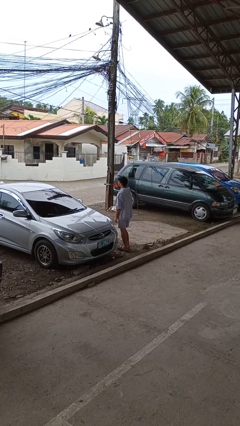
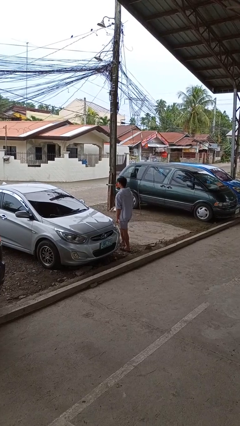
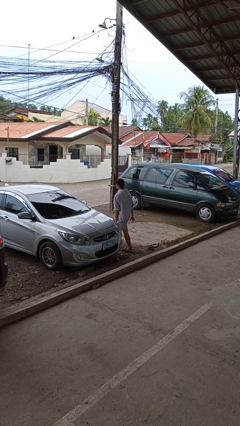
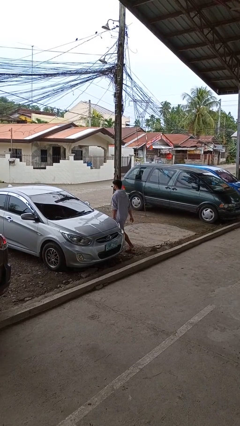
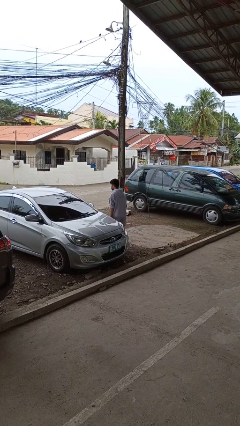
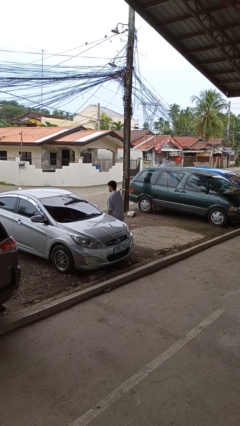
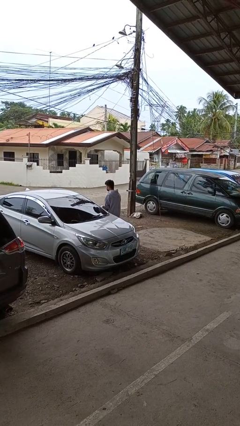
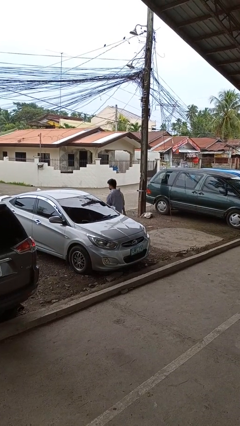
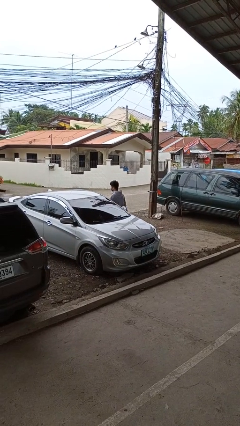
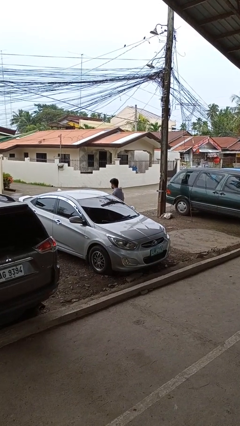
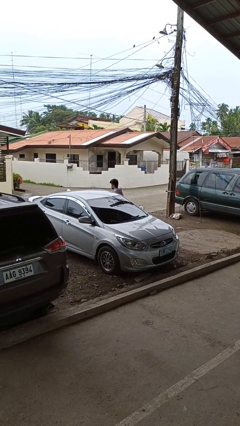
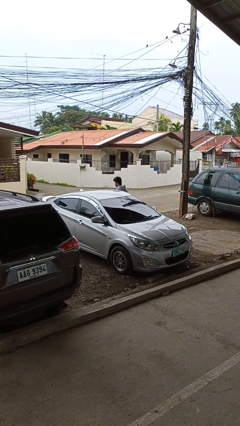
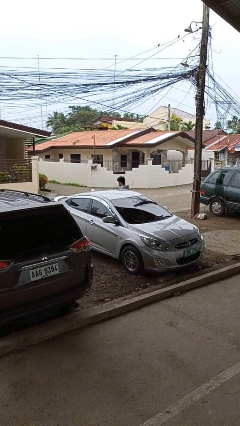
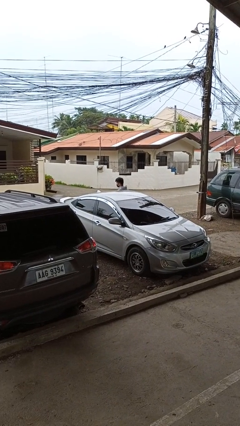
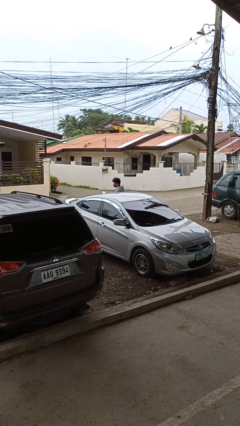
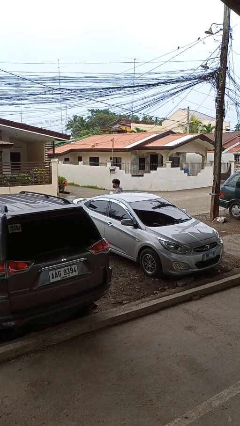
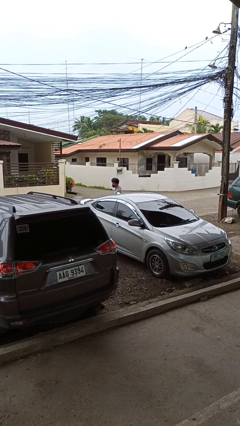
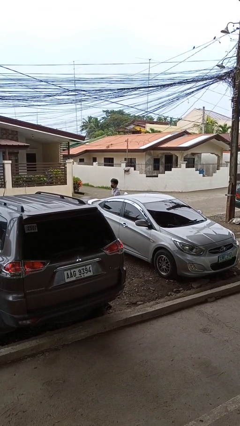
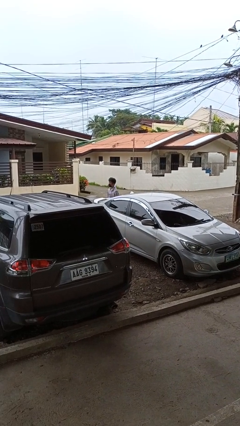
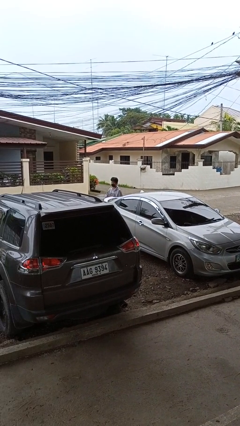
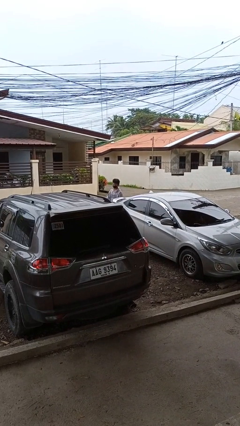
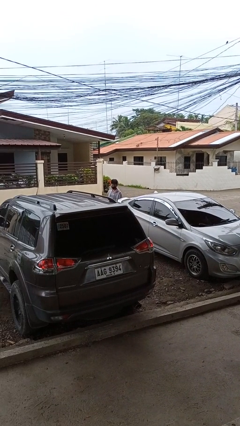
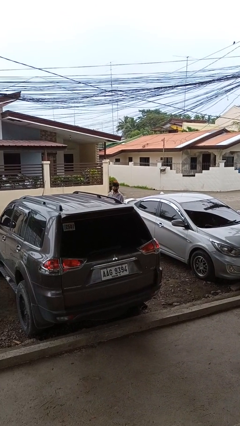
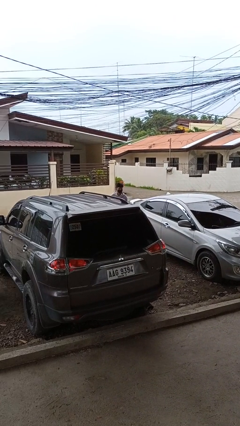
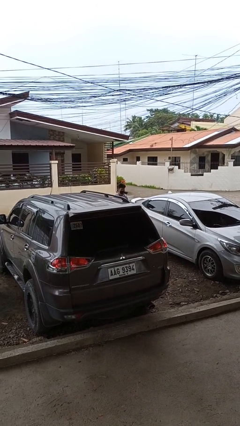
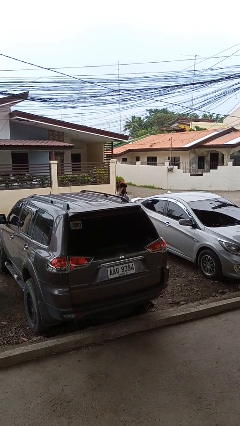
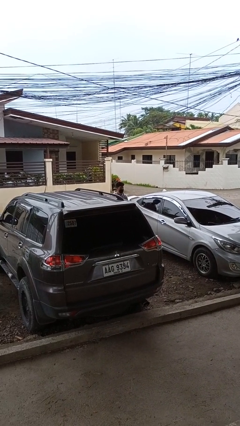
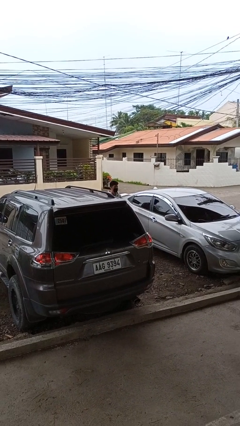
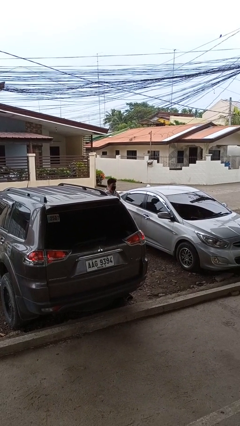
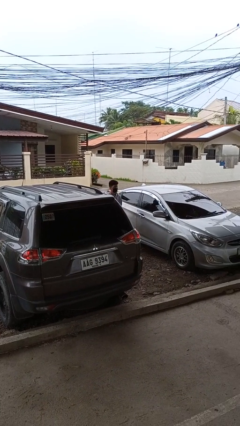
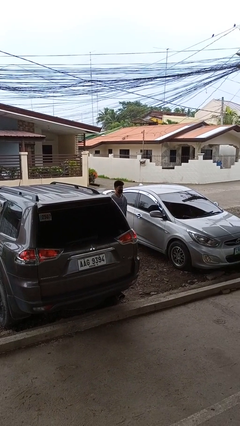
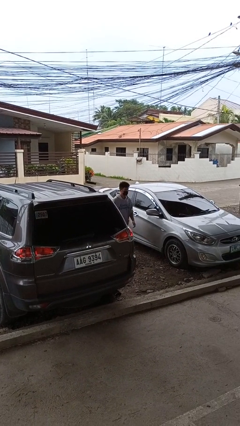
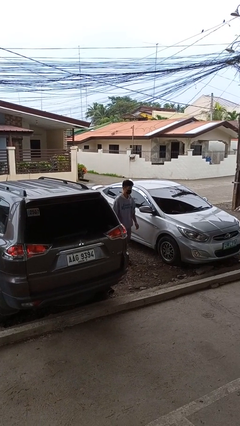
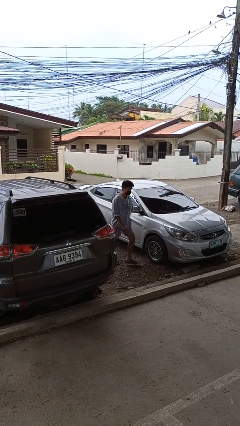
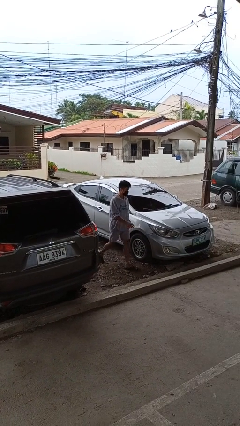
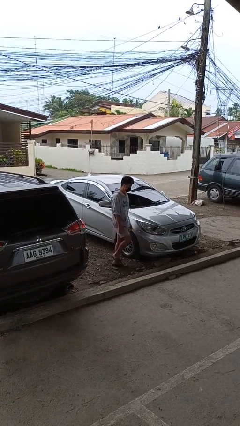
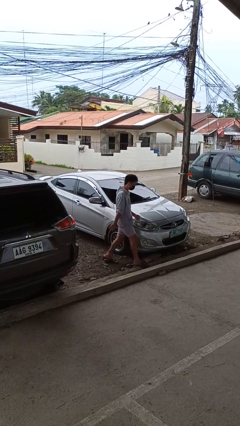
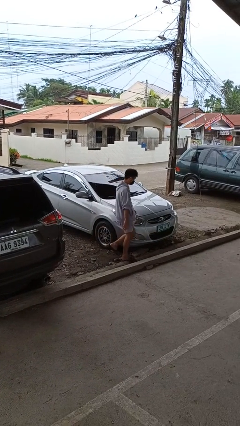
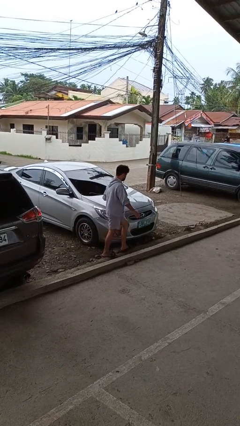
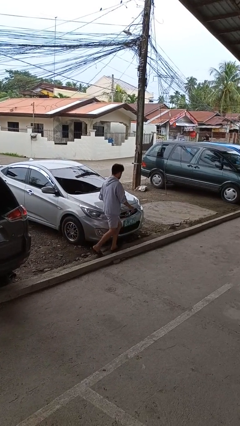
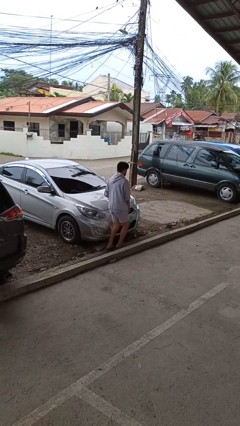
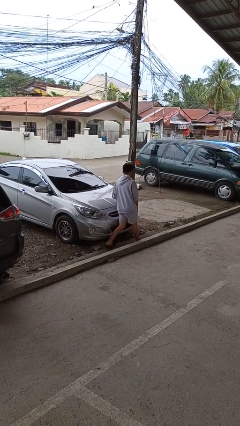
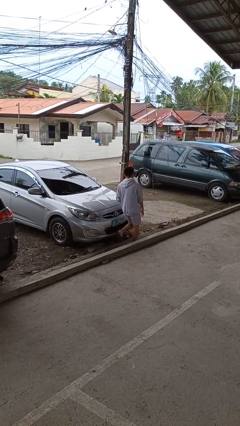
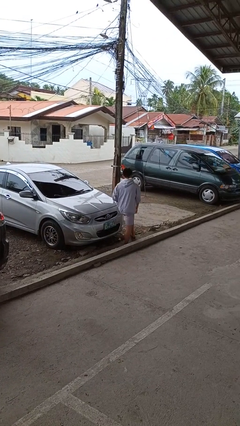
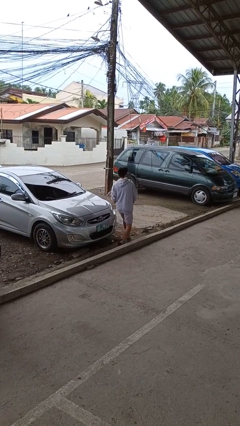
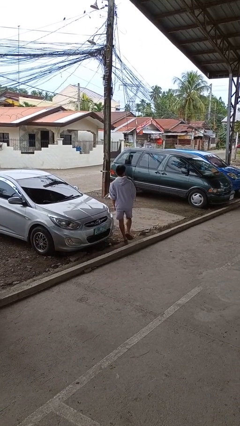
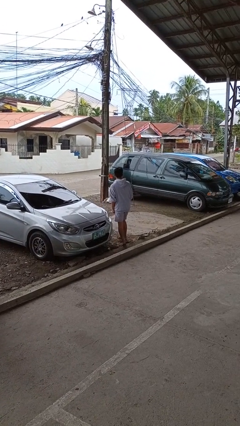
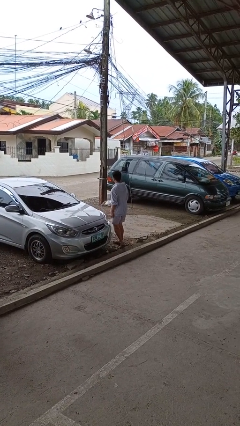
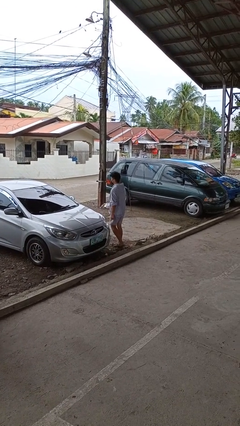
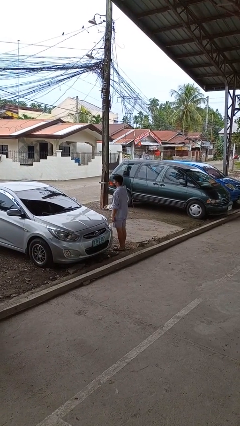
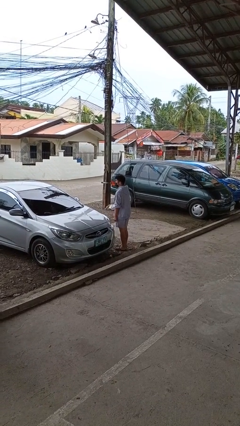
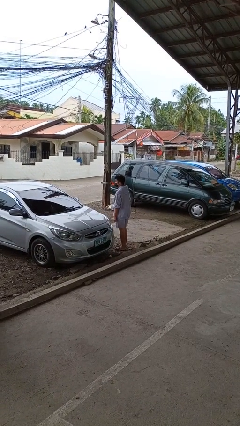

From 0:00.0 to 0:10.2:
person walks around car

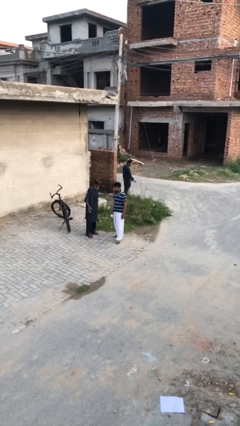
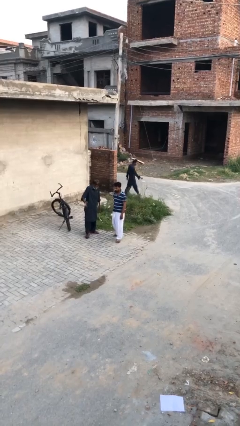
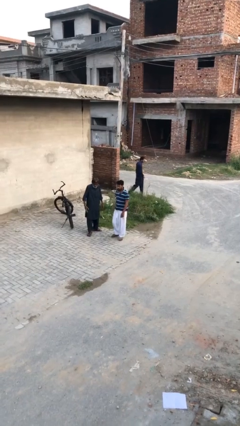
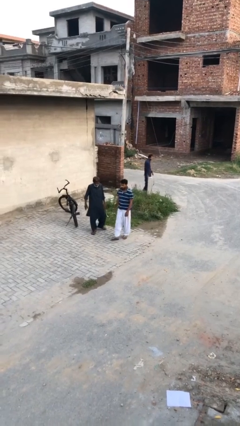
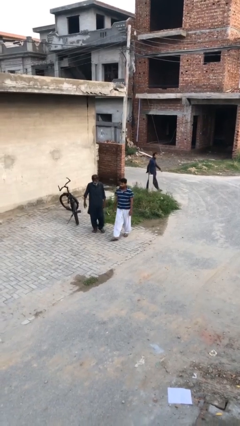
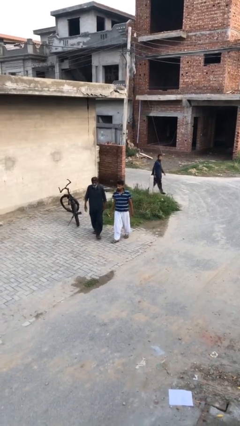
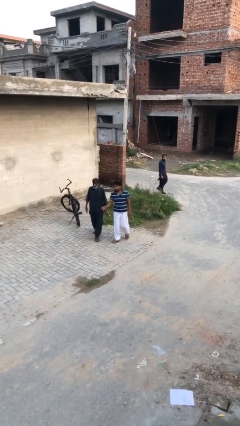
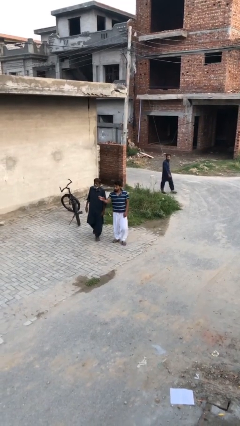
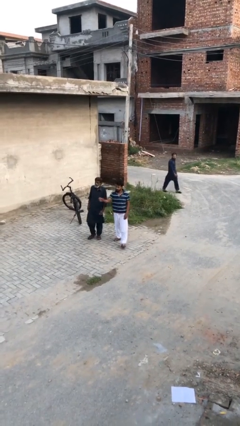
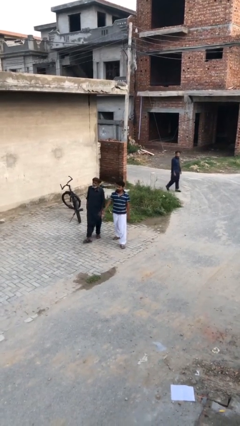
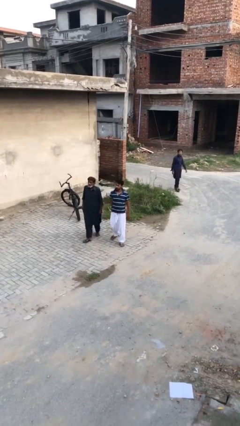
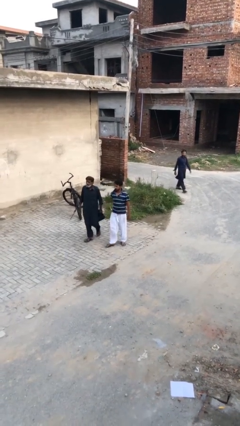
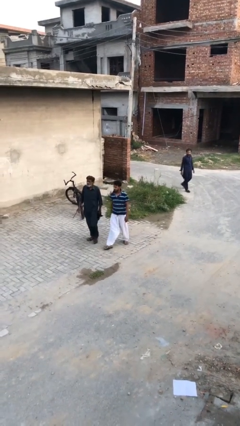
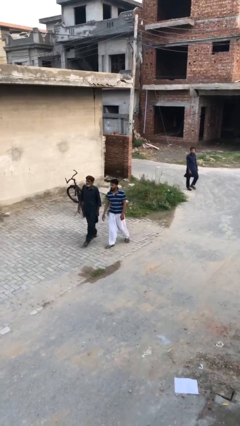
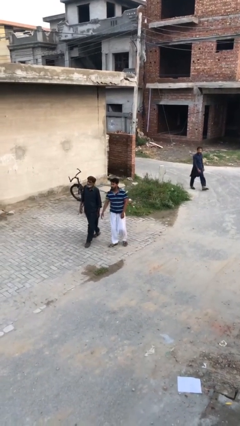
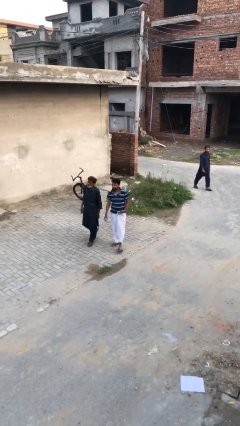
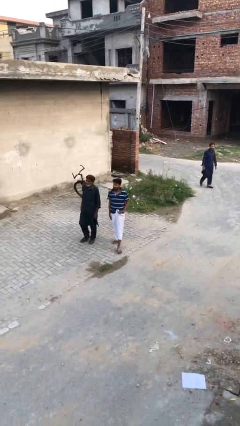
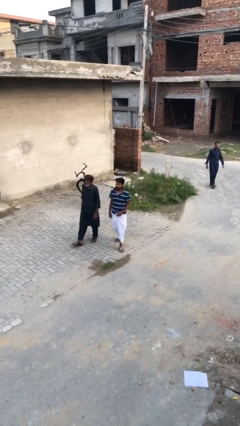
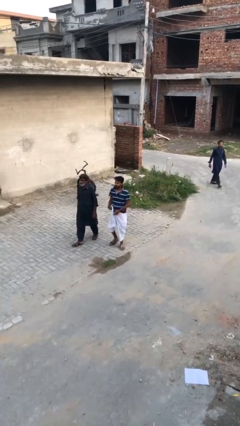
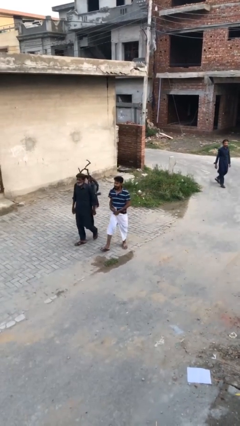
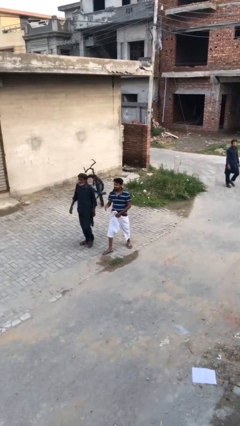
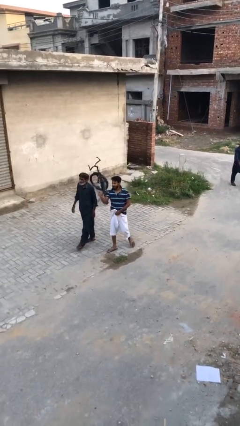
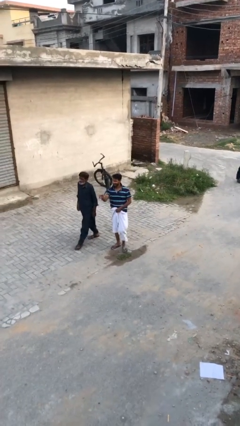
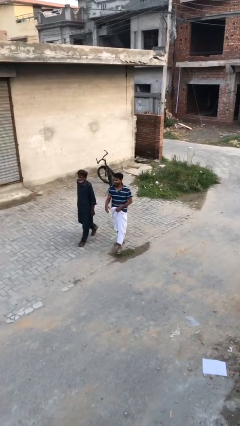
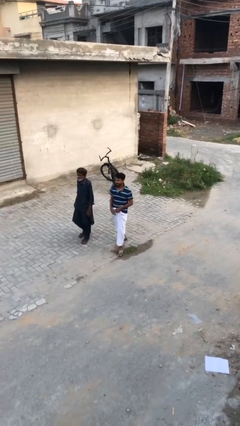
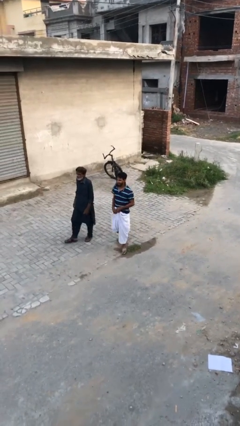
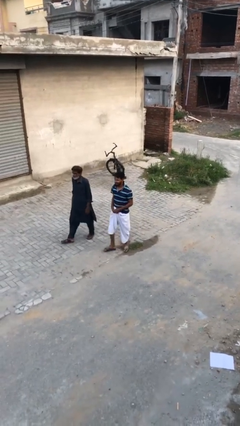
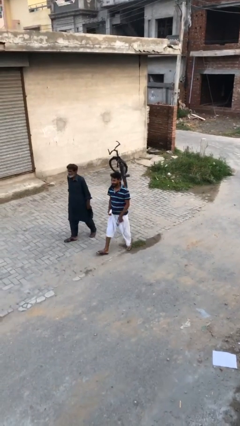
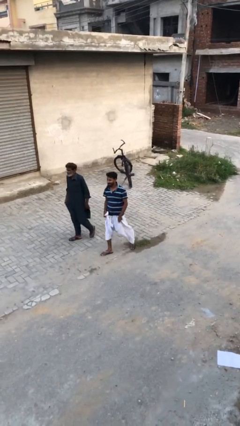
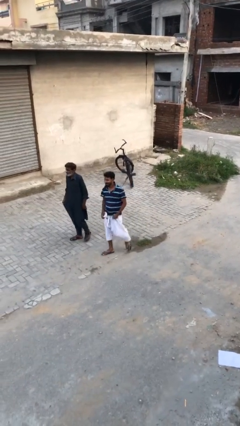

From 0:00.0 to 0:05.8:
person talks to person

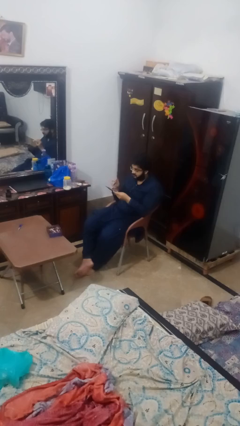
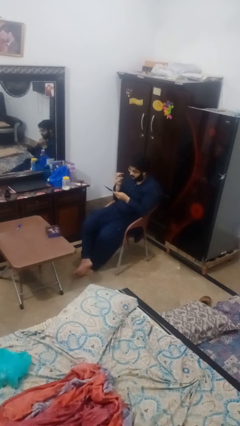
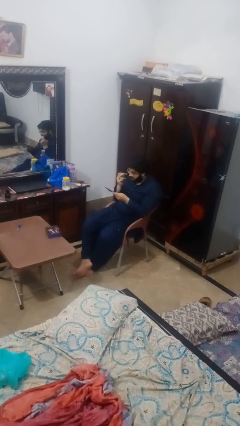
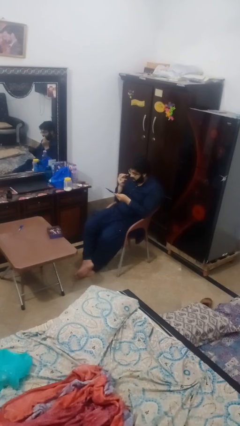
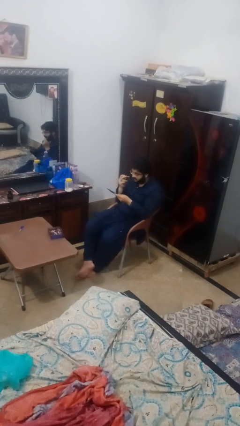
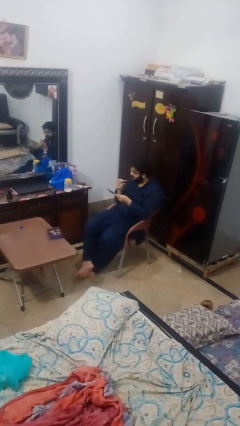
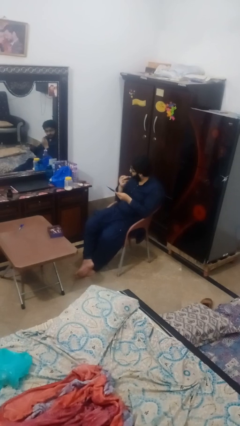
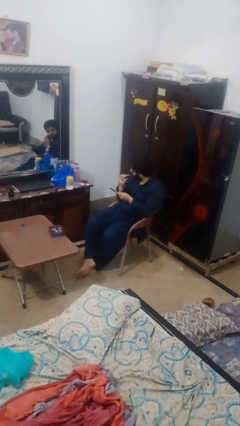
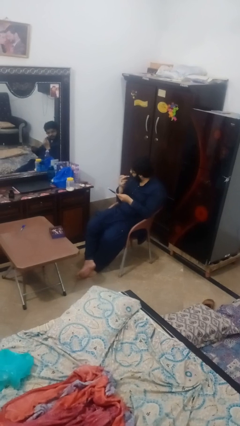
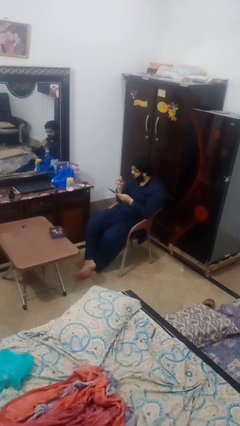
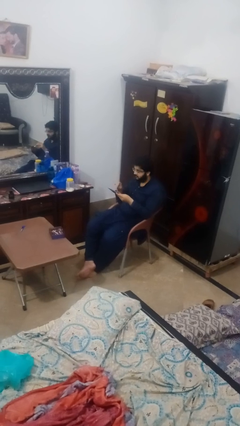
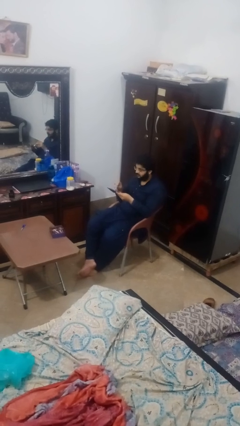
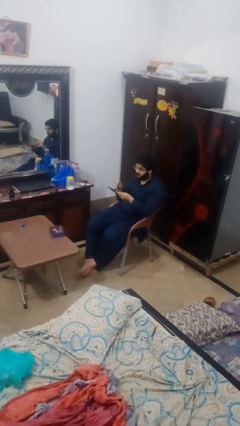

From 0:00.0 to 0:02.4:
person applies foundation makeup
